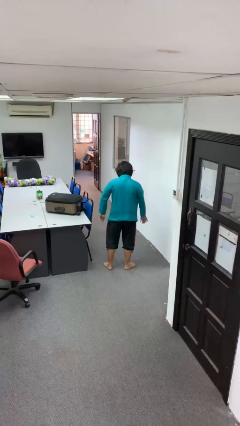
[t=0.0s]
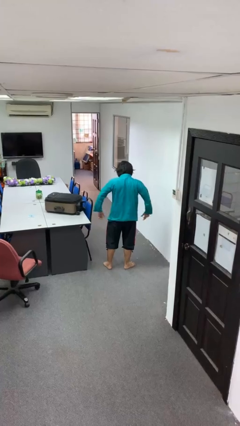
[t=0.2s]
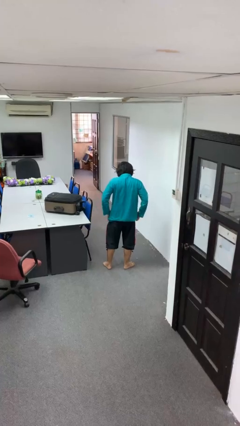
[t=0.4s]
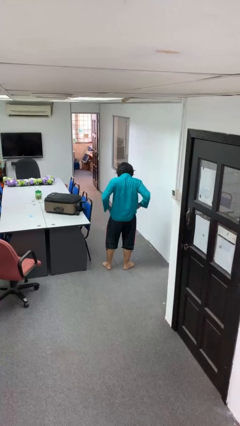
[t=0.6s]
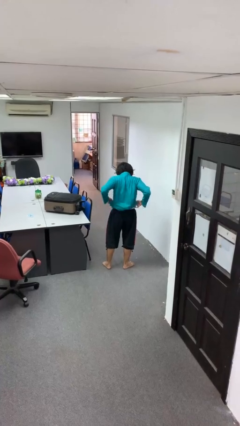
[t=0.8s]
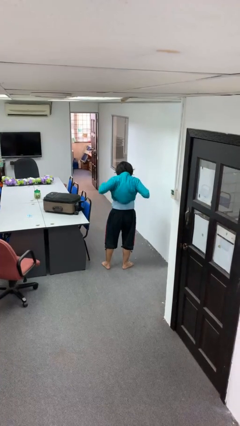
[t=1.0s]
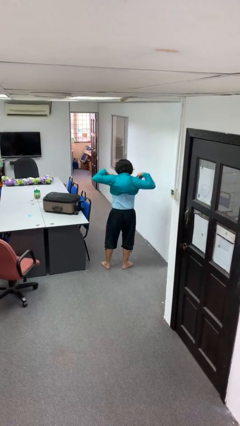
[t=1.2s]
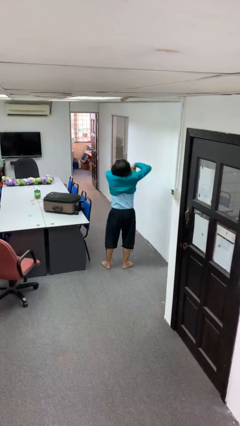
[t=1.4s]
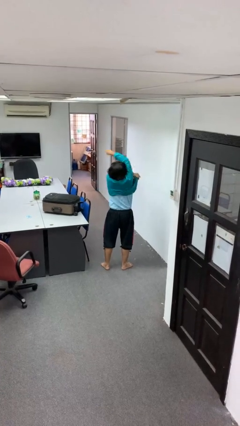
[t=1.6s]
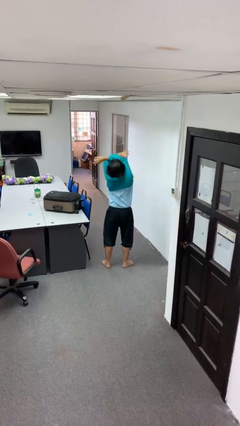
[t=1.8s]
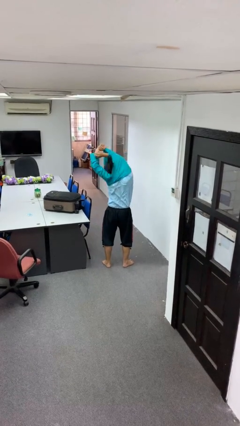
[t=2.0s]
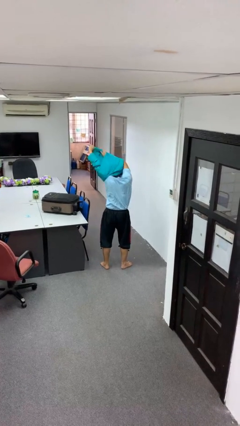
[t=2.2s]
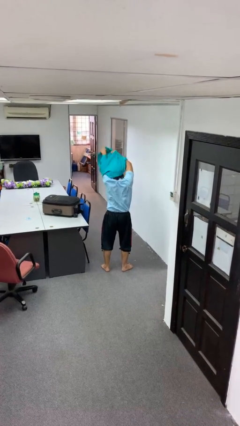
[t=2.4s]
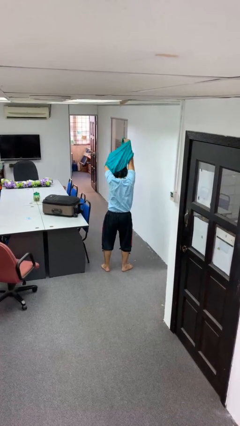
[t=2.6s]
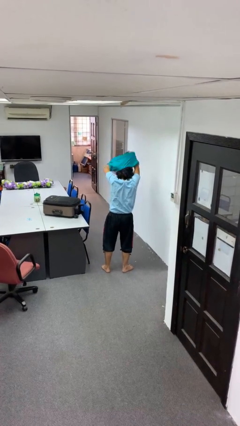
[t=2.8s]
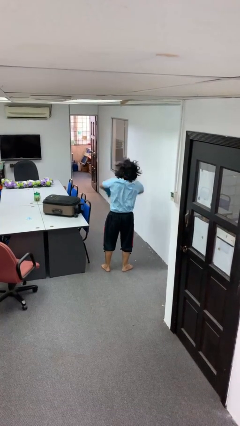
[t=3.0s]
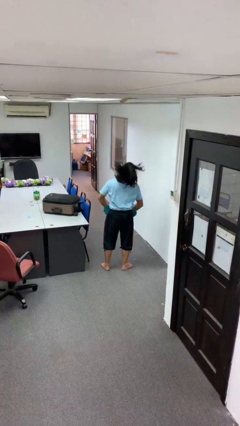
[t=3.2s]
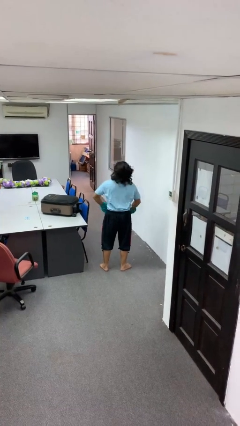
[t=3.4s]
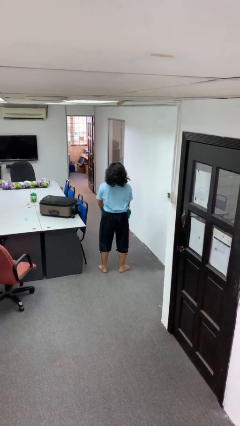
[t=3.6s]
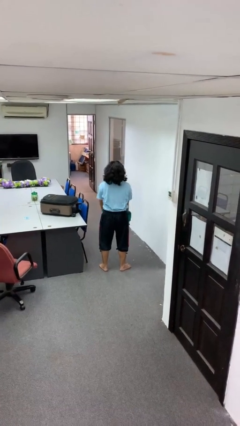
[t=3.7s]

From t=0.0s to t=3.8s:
person takes off shirt

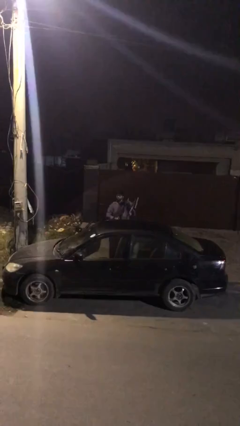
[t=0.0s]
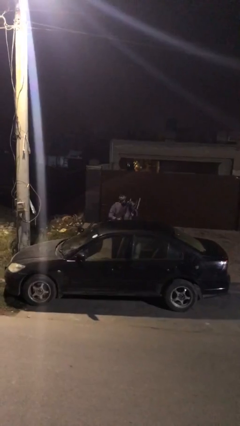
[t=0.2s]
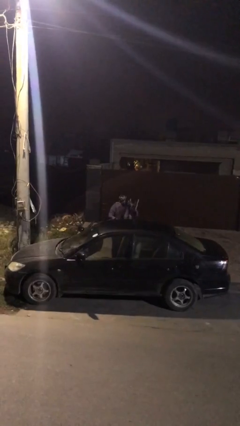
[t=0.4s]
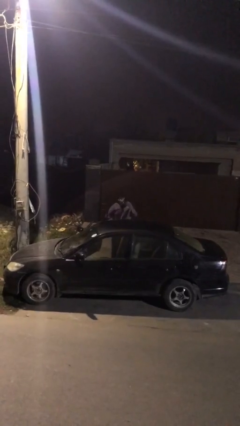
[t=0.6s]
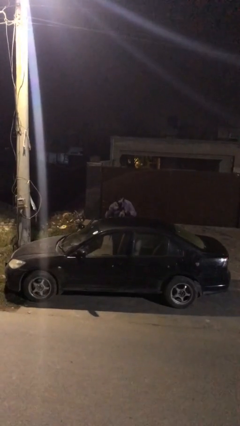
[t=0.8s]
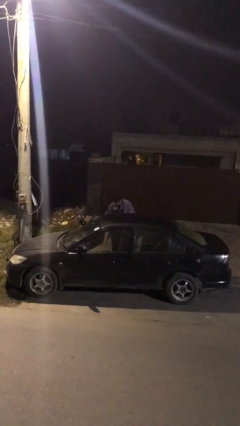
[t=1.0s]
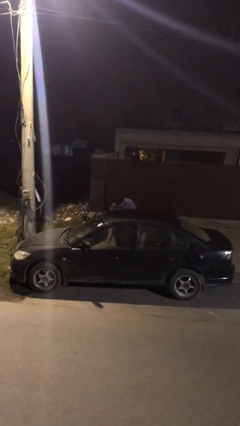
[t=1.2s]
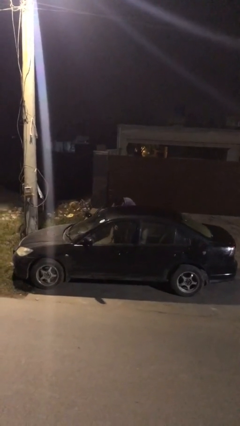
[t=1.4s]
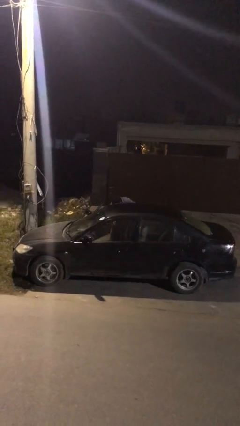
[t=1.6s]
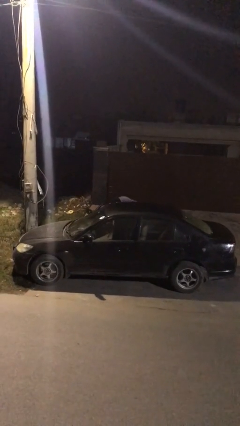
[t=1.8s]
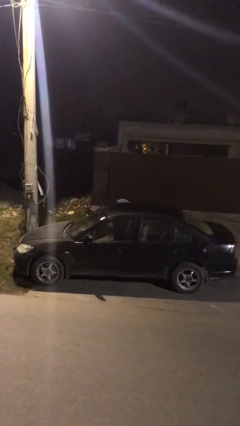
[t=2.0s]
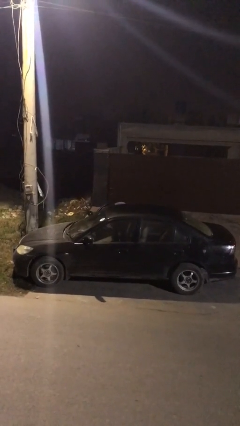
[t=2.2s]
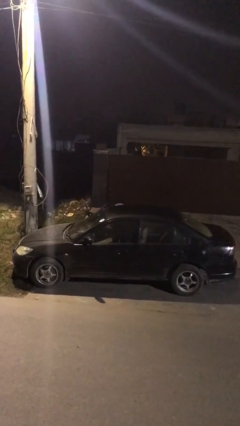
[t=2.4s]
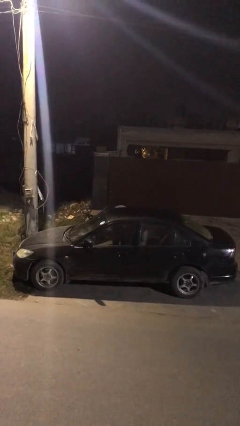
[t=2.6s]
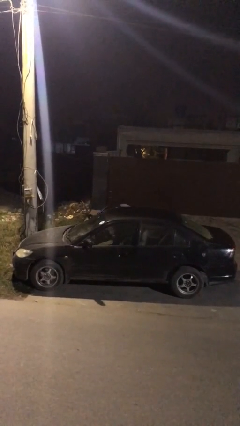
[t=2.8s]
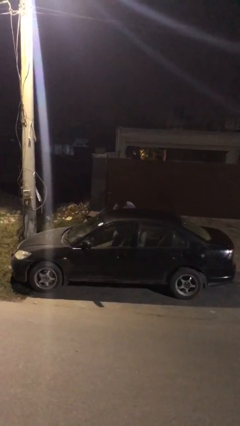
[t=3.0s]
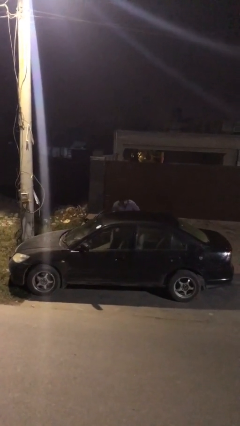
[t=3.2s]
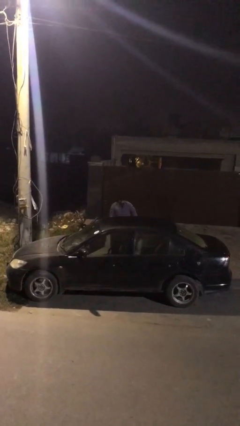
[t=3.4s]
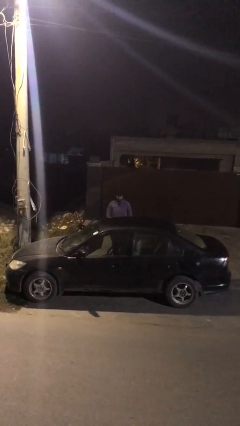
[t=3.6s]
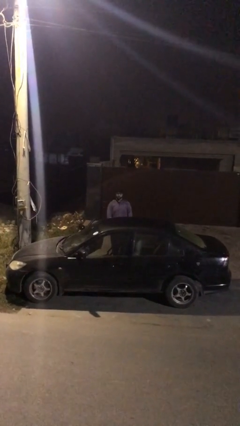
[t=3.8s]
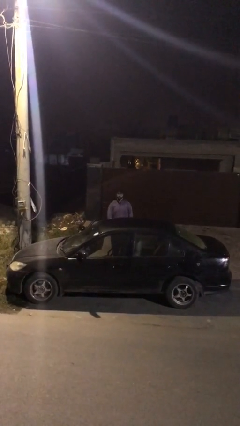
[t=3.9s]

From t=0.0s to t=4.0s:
person loads car

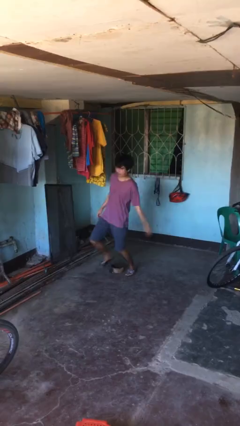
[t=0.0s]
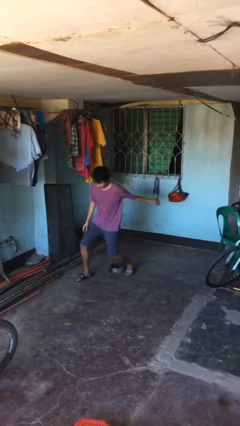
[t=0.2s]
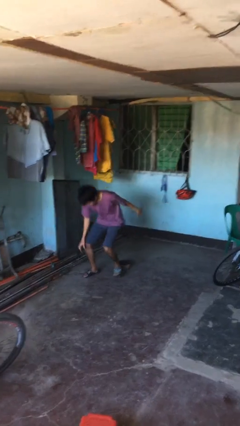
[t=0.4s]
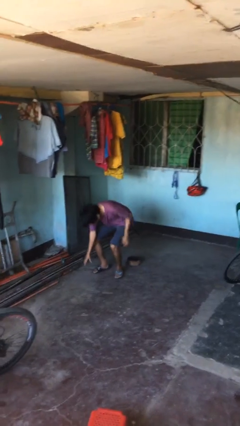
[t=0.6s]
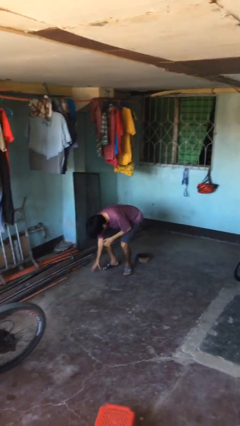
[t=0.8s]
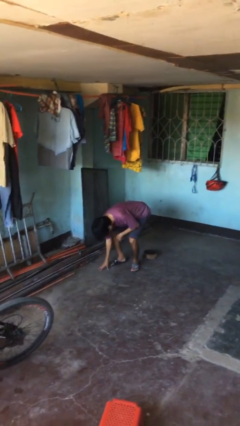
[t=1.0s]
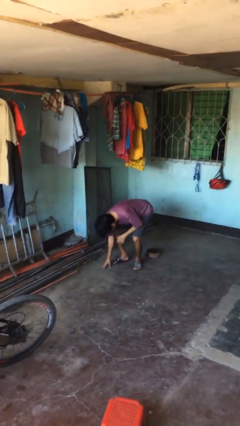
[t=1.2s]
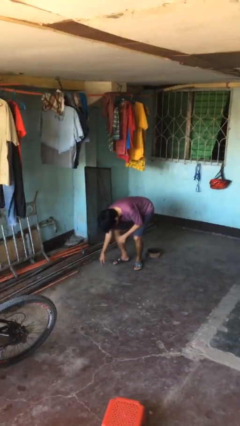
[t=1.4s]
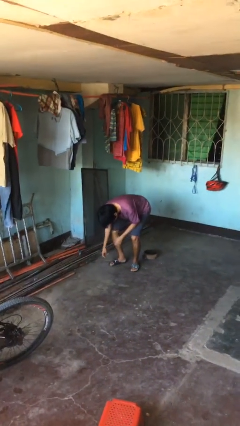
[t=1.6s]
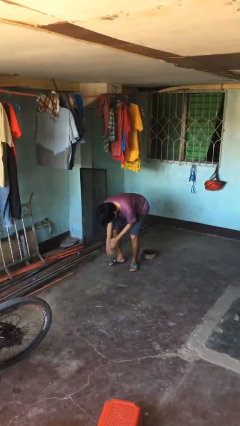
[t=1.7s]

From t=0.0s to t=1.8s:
person trips on object on floor

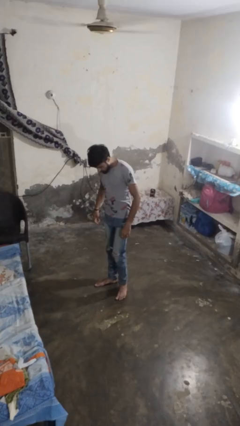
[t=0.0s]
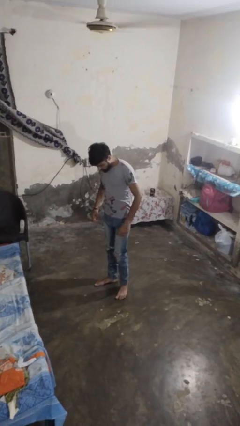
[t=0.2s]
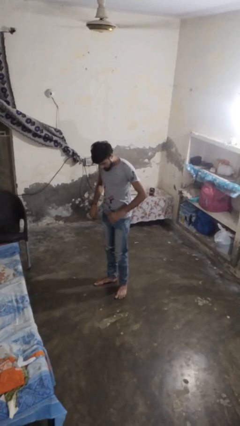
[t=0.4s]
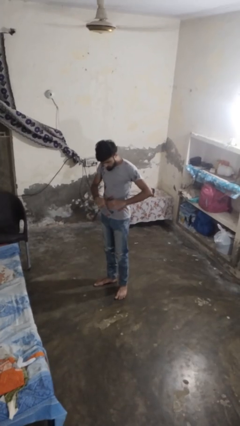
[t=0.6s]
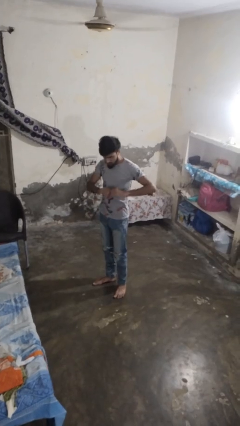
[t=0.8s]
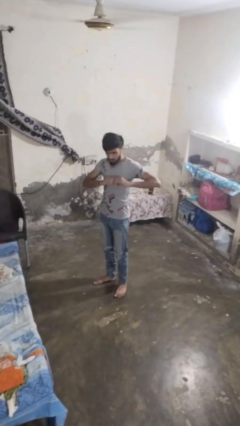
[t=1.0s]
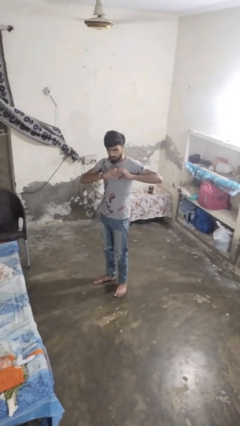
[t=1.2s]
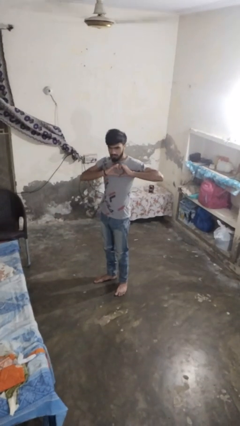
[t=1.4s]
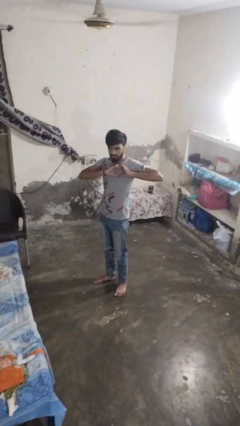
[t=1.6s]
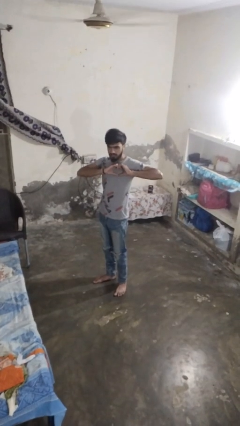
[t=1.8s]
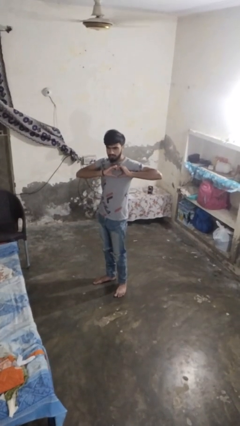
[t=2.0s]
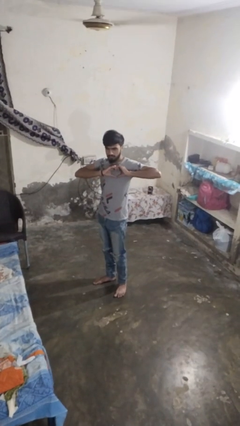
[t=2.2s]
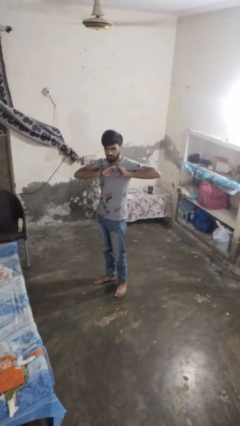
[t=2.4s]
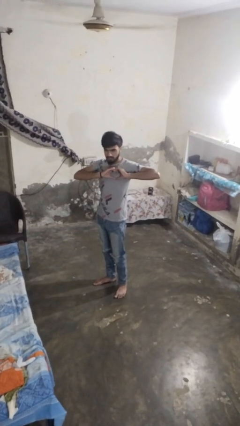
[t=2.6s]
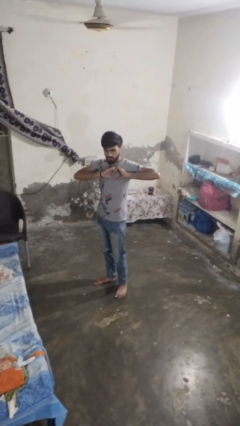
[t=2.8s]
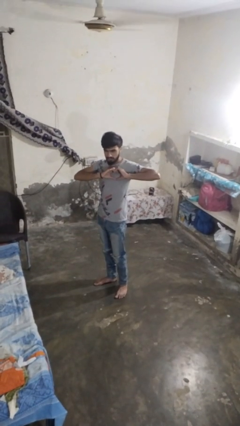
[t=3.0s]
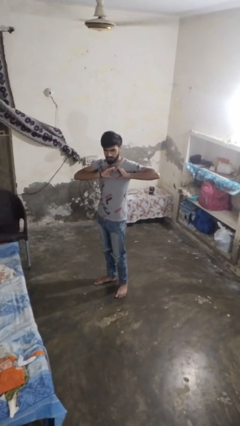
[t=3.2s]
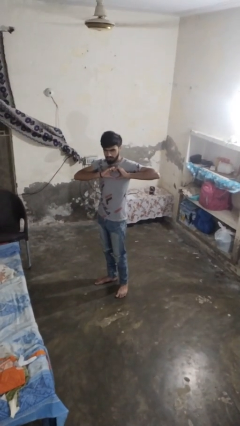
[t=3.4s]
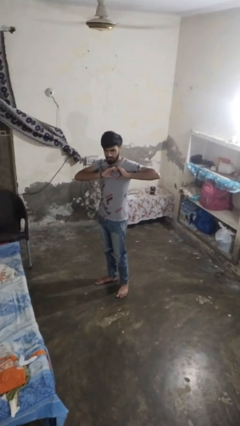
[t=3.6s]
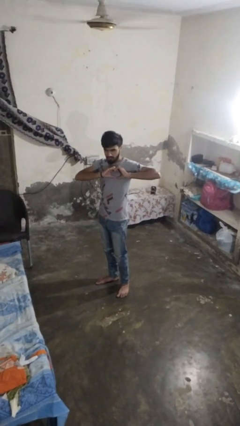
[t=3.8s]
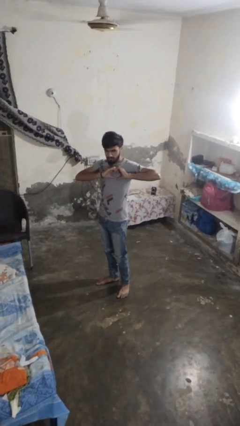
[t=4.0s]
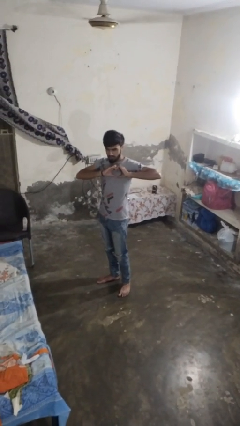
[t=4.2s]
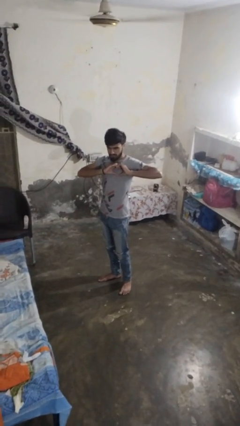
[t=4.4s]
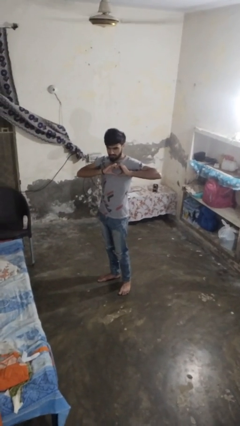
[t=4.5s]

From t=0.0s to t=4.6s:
person gestures heart

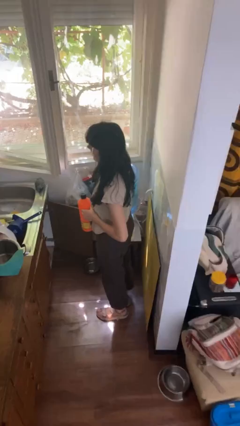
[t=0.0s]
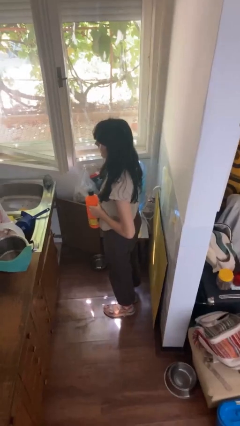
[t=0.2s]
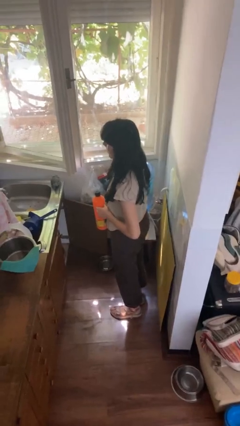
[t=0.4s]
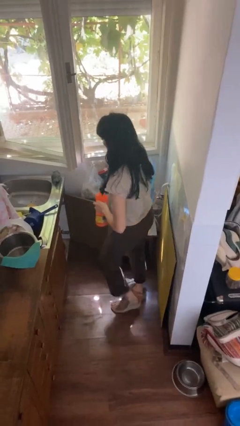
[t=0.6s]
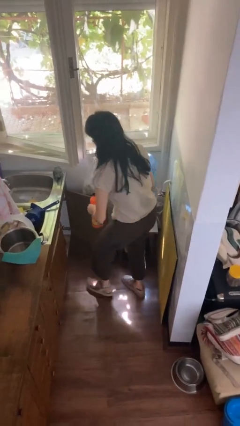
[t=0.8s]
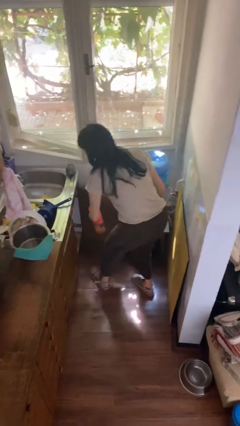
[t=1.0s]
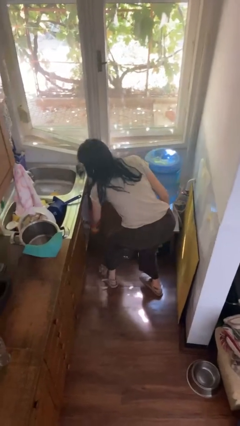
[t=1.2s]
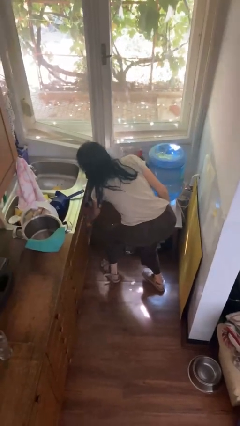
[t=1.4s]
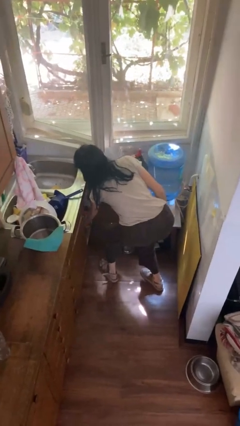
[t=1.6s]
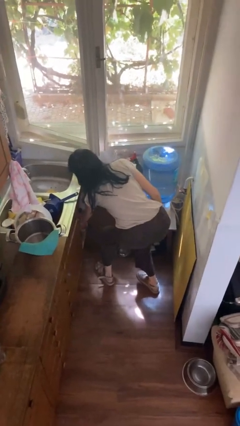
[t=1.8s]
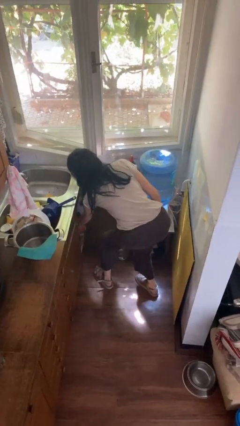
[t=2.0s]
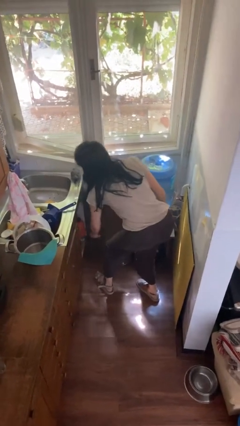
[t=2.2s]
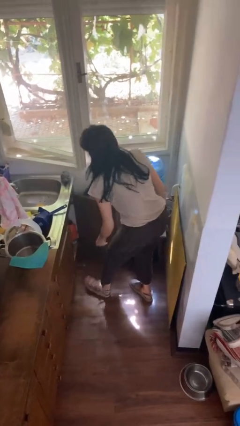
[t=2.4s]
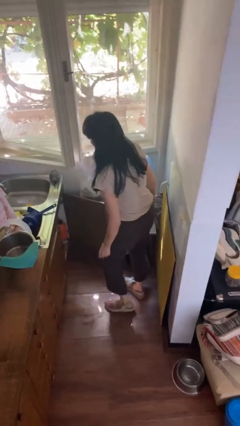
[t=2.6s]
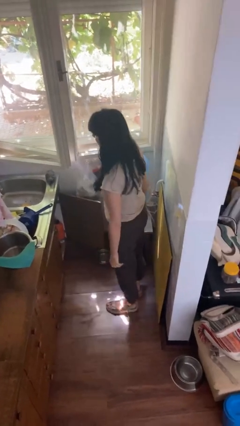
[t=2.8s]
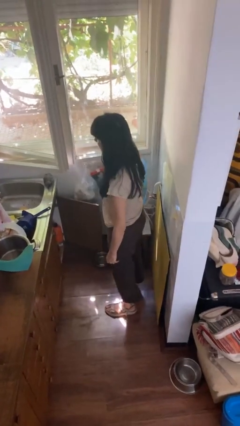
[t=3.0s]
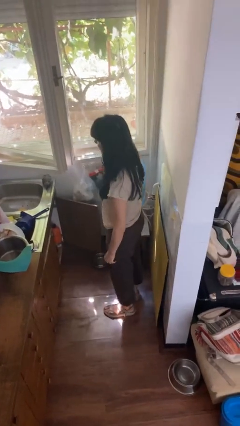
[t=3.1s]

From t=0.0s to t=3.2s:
person puts down object into cabinet
